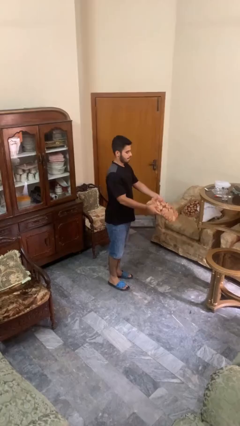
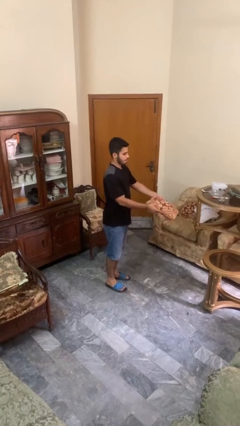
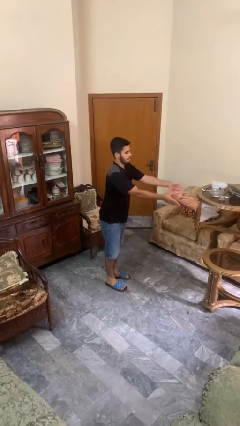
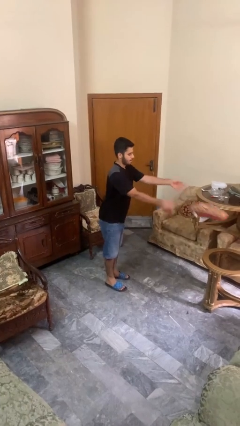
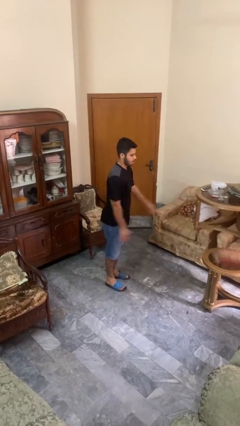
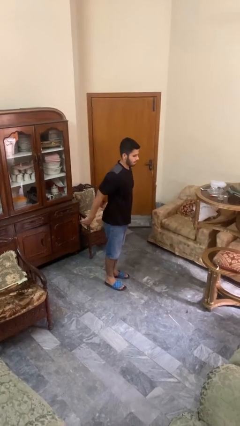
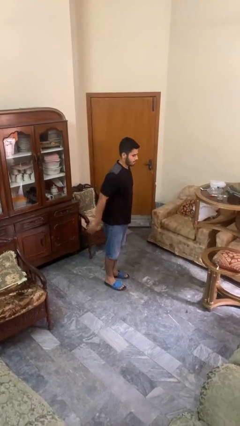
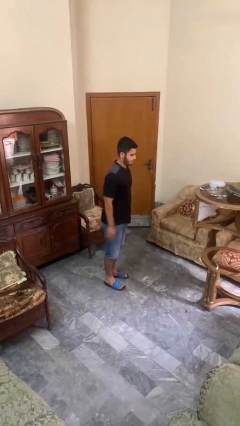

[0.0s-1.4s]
person throws object on table

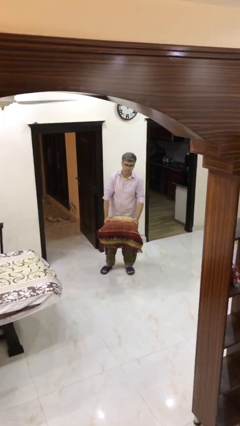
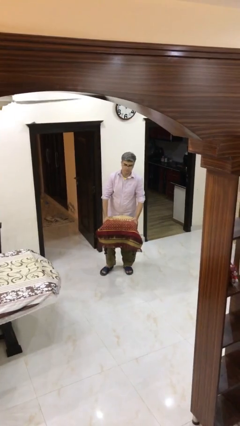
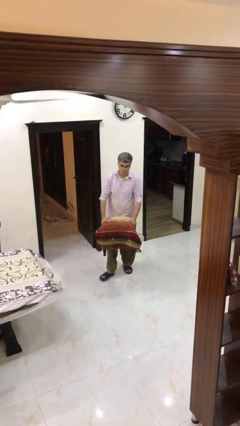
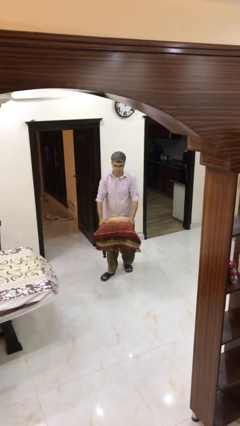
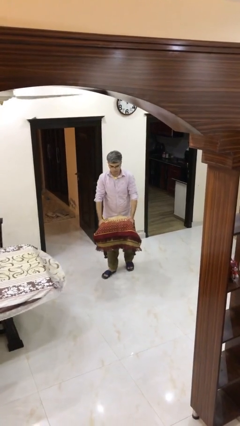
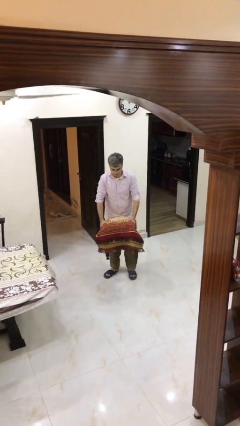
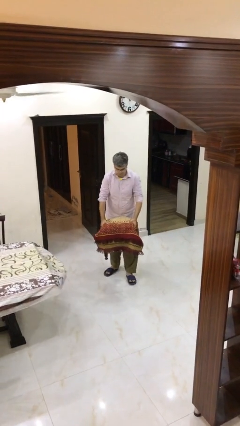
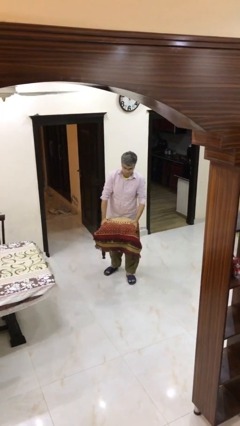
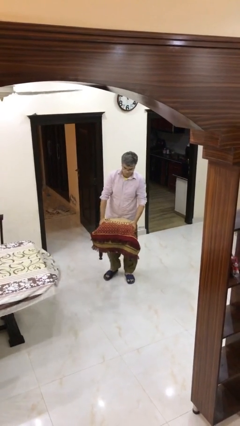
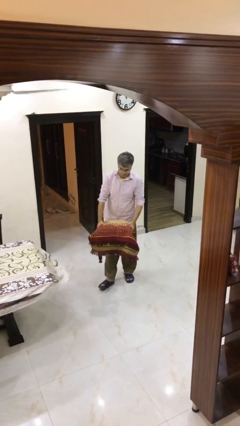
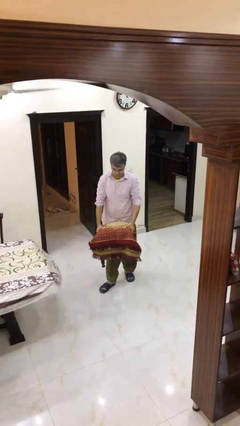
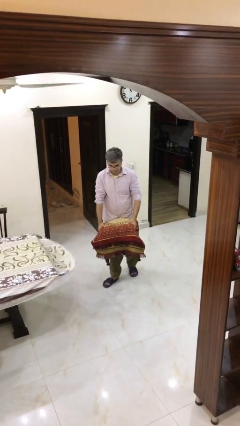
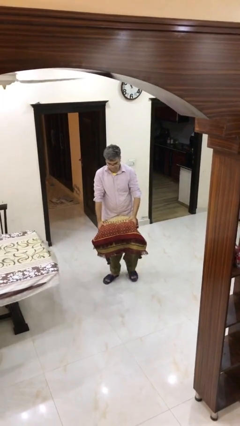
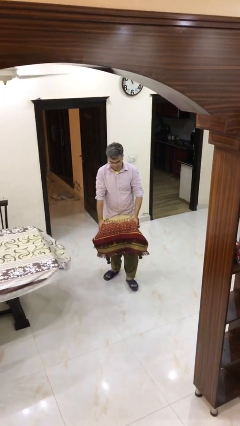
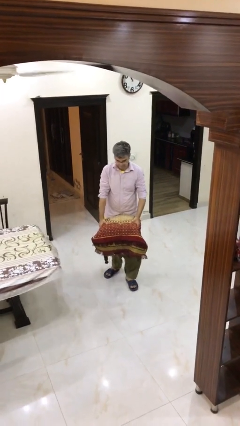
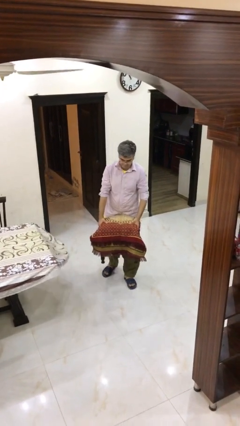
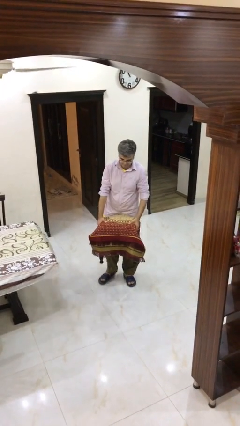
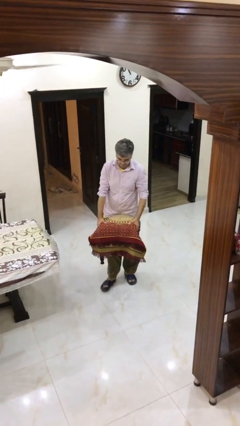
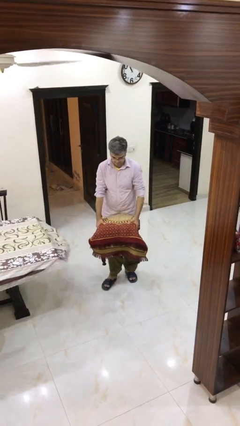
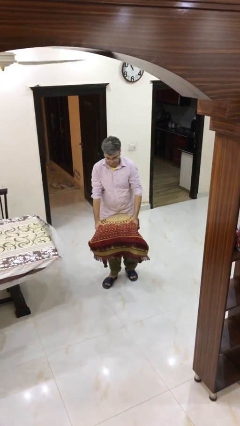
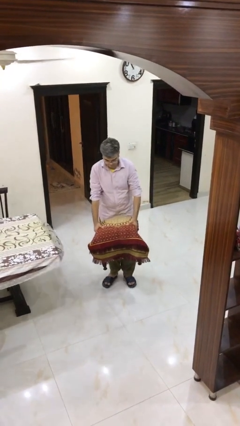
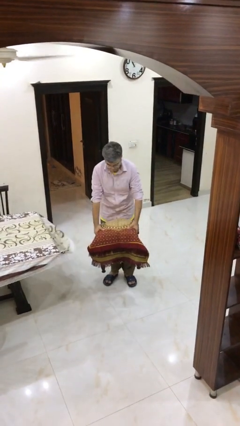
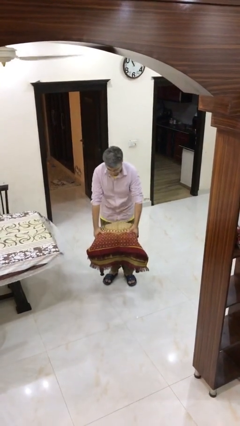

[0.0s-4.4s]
person carries heavy object

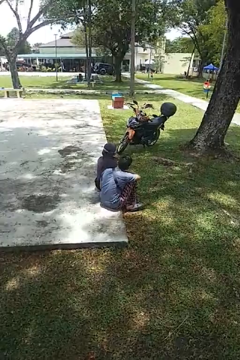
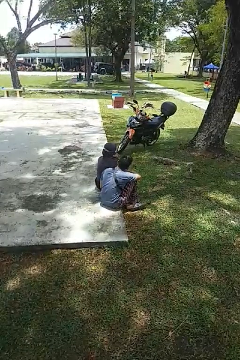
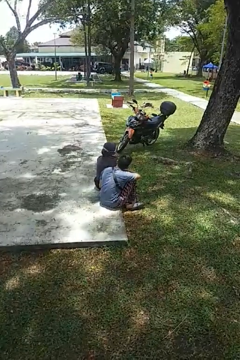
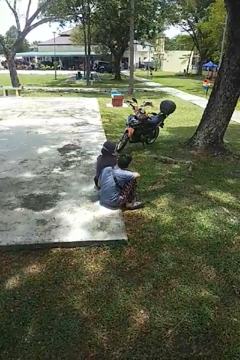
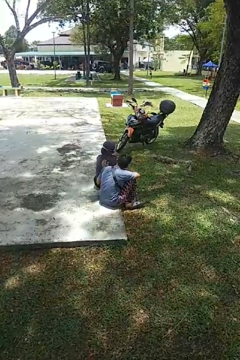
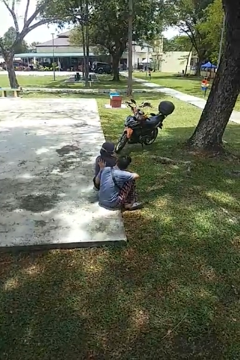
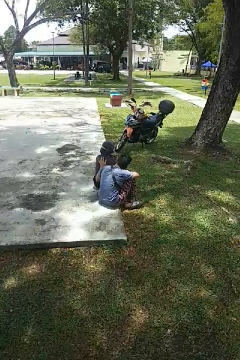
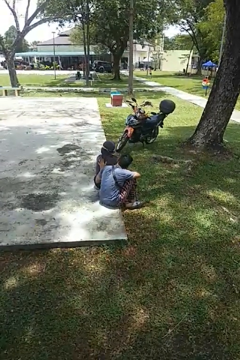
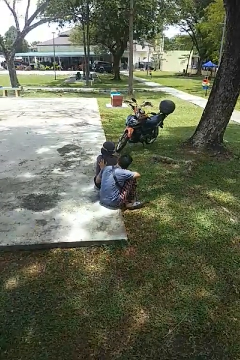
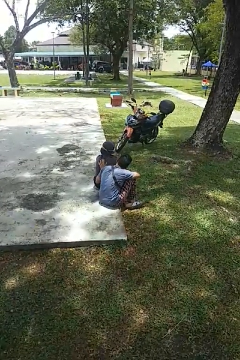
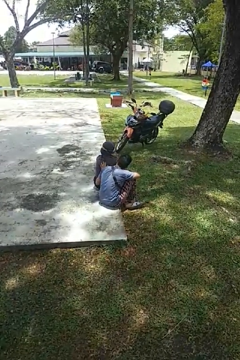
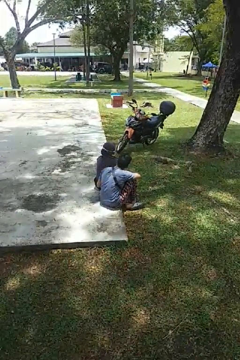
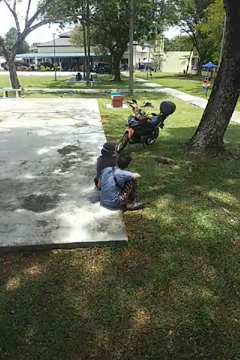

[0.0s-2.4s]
person touches back of person

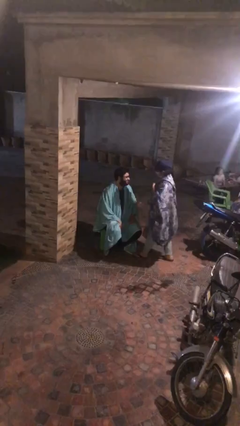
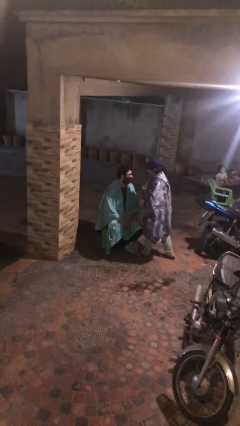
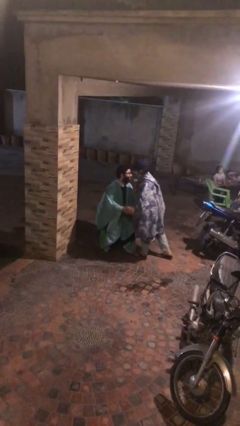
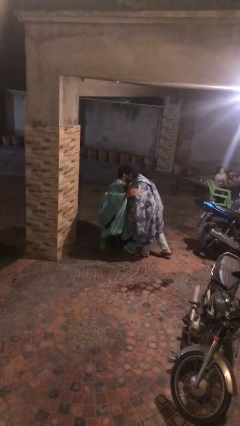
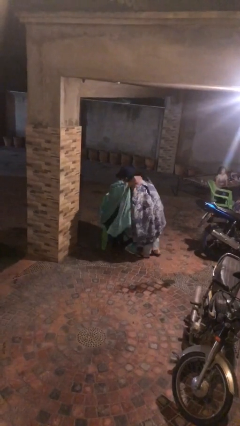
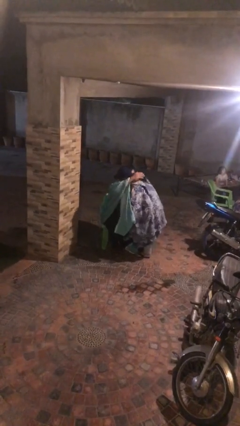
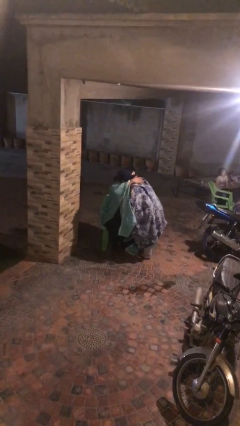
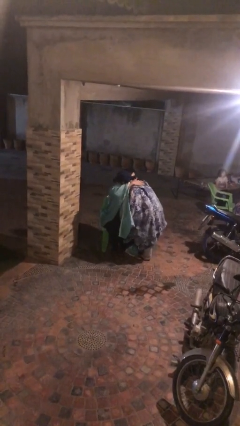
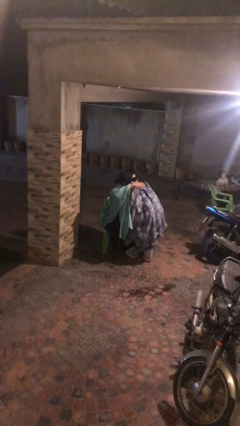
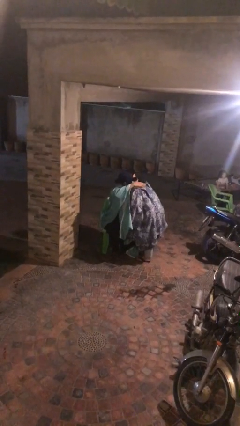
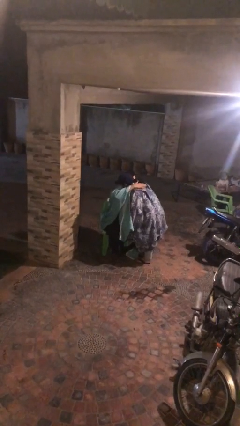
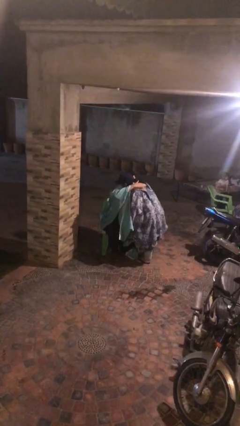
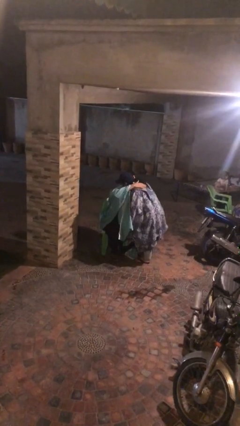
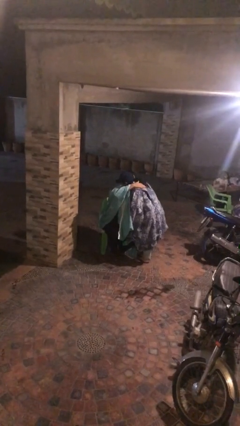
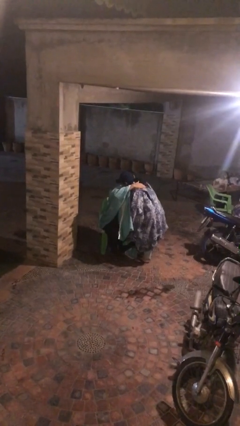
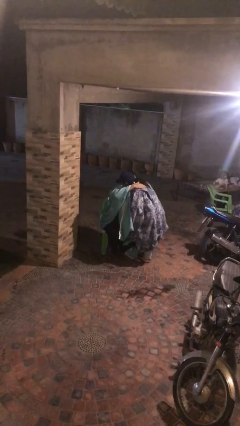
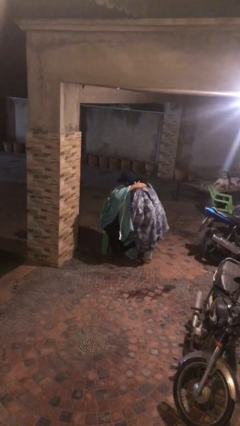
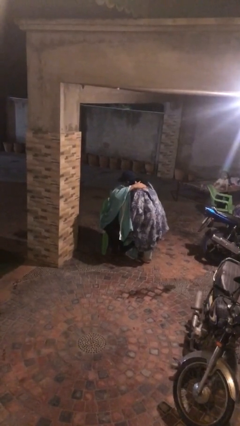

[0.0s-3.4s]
person embraces person

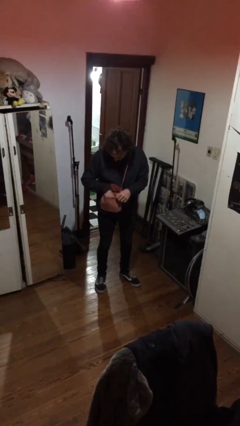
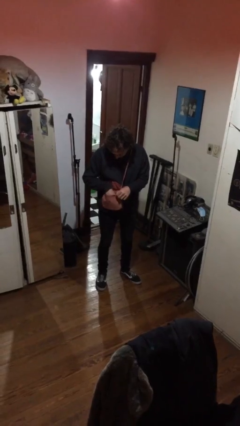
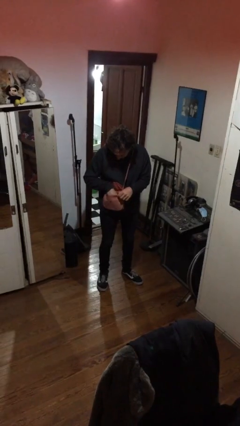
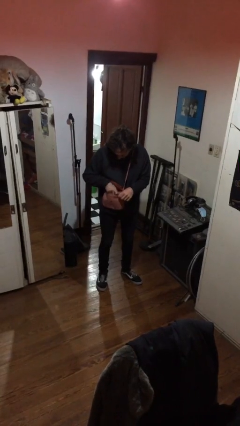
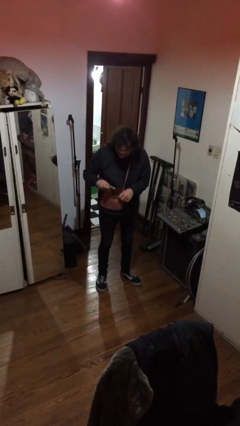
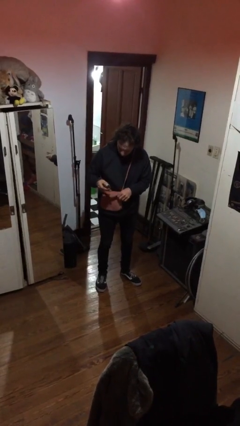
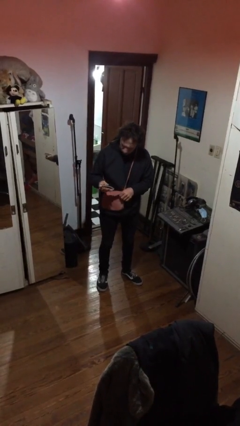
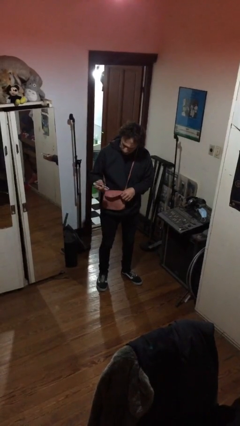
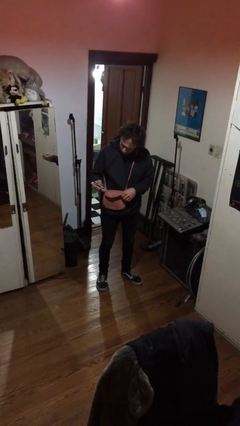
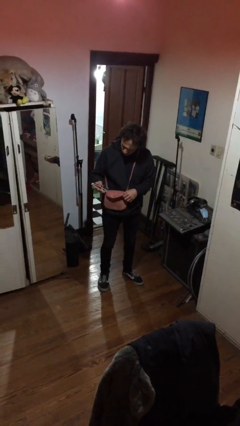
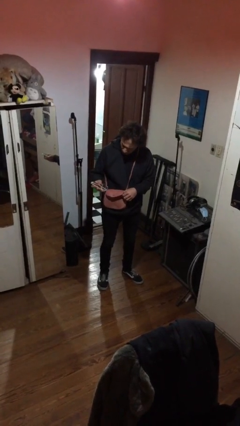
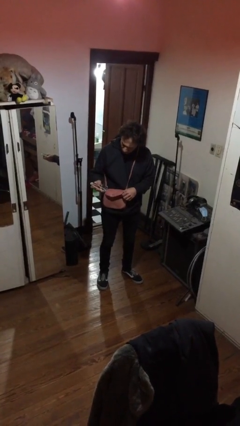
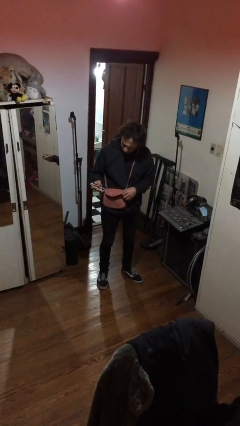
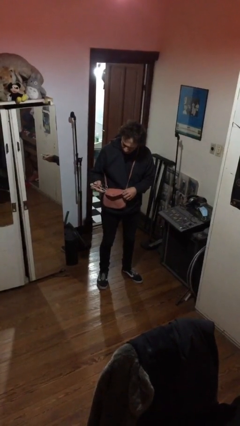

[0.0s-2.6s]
person takes object from purse

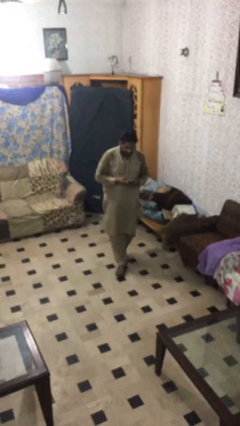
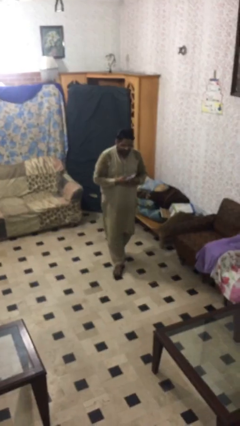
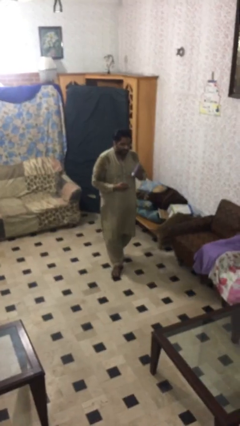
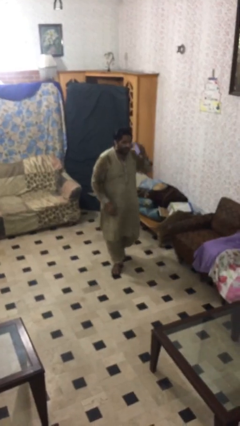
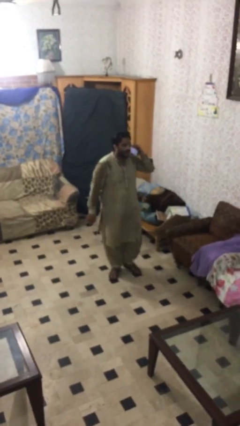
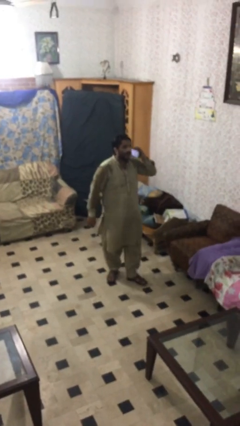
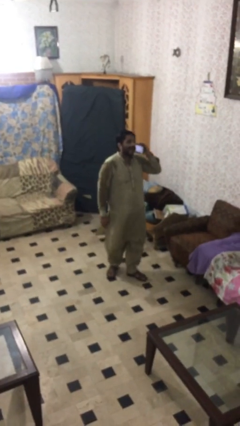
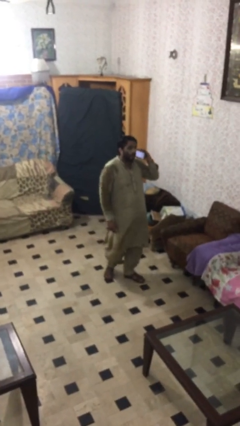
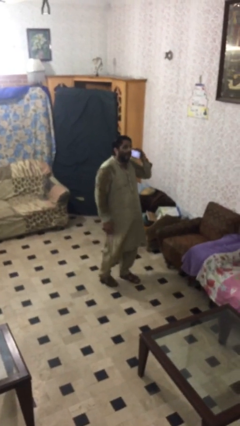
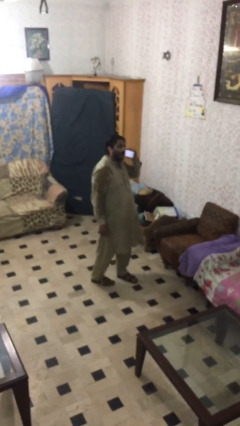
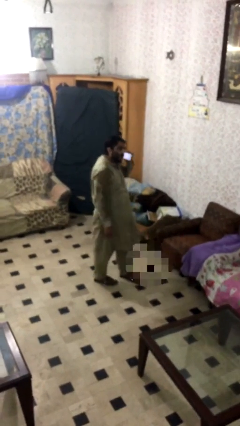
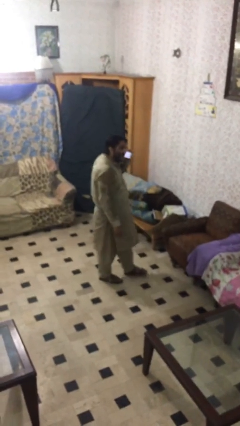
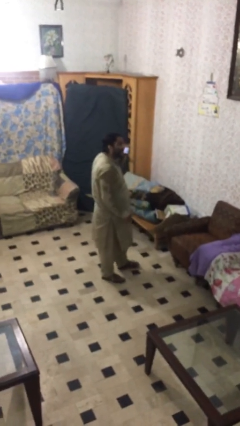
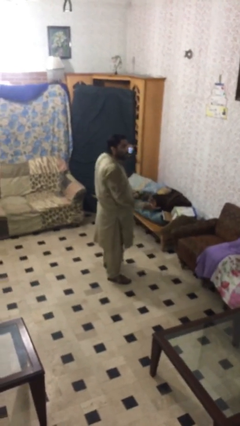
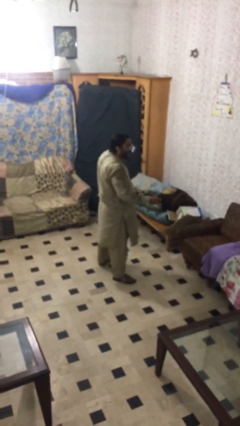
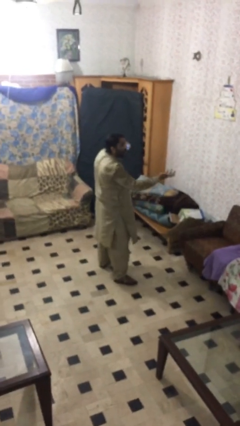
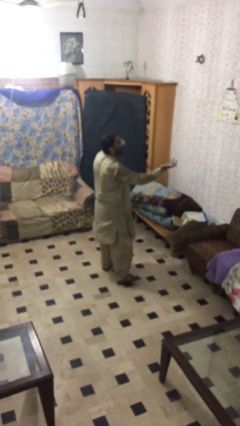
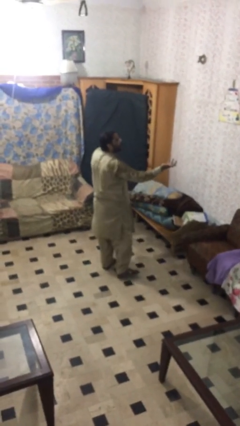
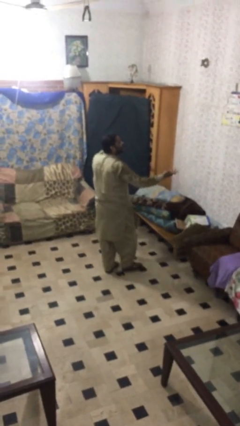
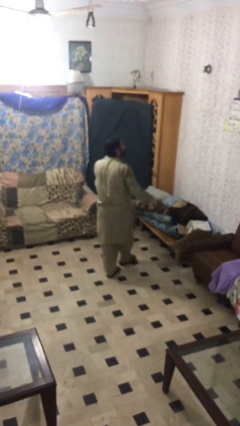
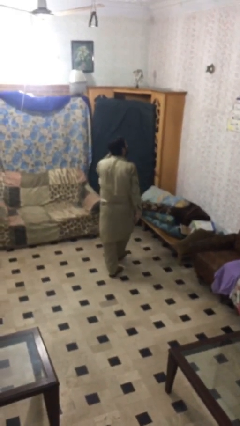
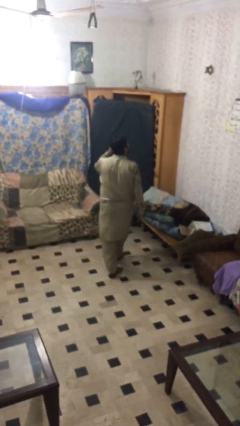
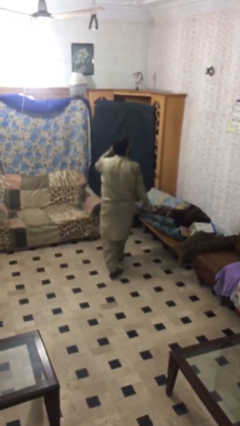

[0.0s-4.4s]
person talks on phone
